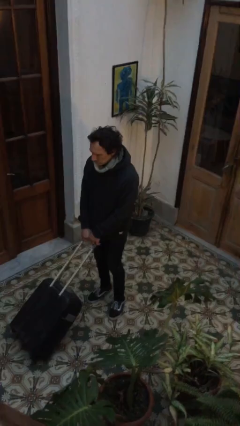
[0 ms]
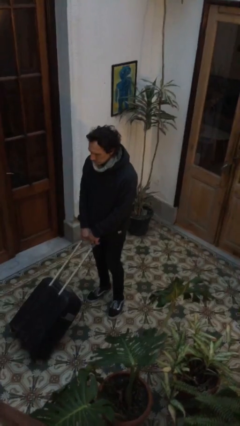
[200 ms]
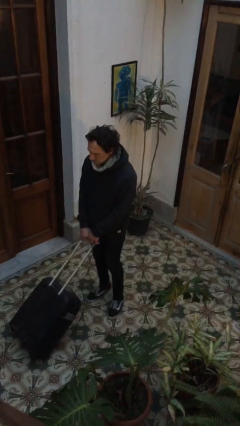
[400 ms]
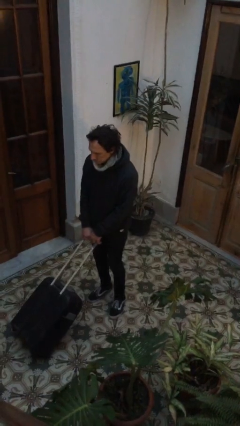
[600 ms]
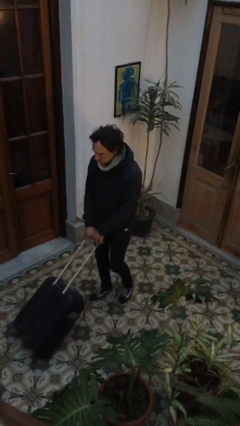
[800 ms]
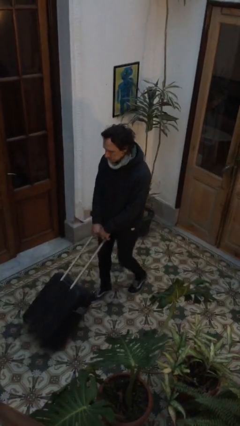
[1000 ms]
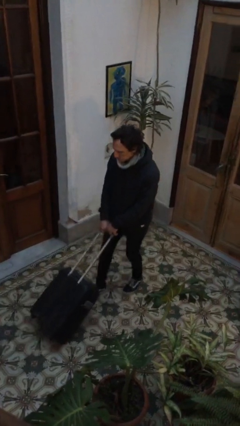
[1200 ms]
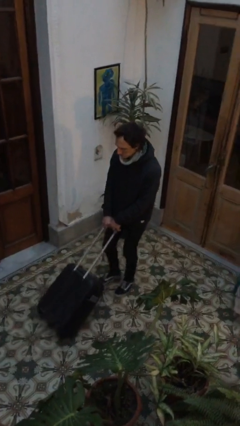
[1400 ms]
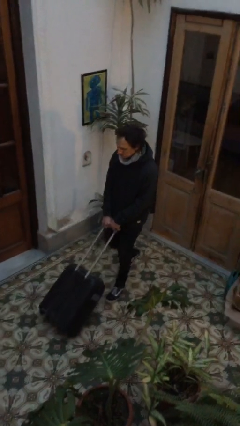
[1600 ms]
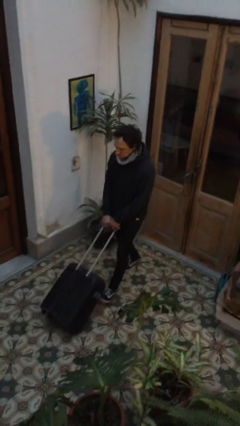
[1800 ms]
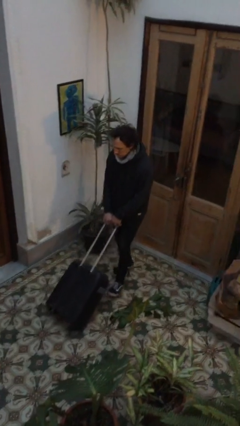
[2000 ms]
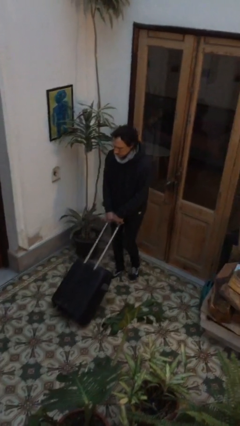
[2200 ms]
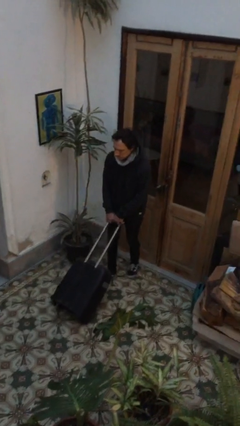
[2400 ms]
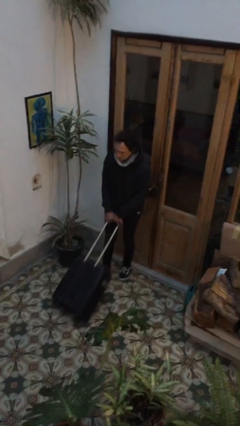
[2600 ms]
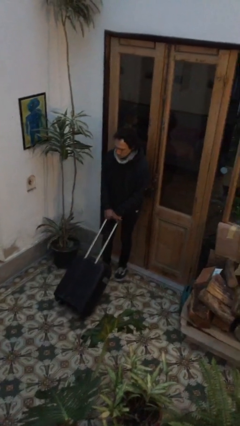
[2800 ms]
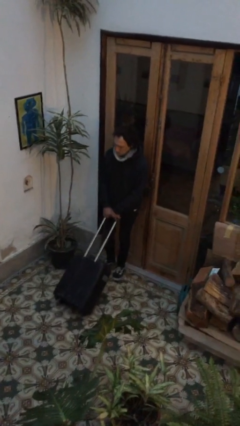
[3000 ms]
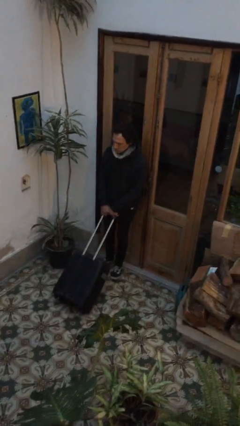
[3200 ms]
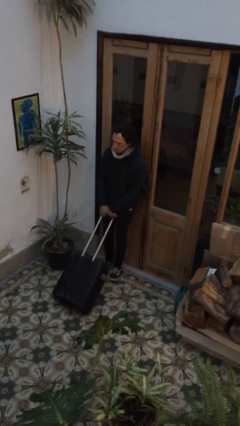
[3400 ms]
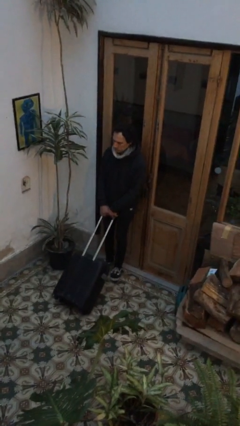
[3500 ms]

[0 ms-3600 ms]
person pulls wheeled cart

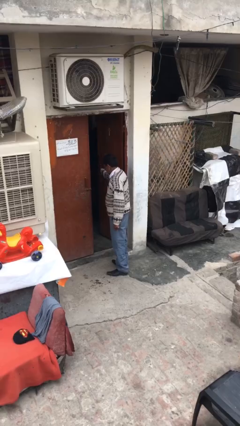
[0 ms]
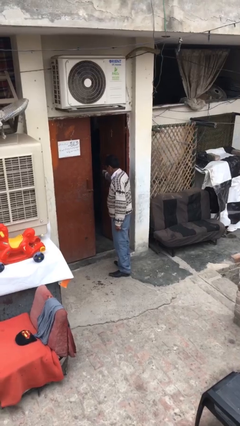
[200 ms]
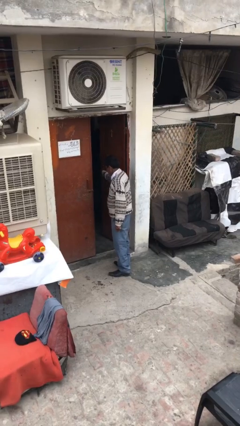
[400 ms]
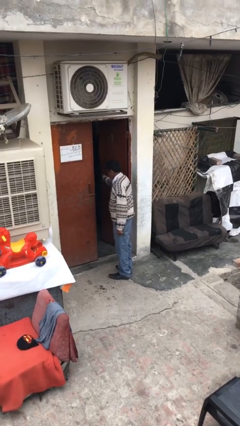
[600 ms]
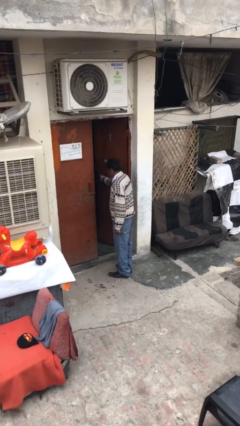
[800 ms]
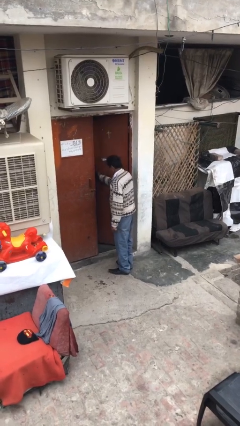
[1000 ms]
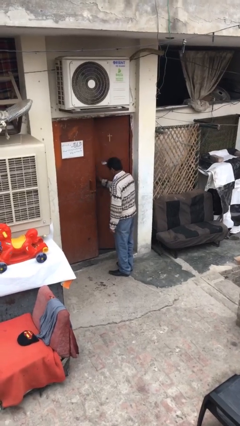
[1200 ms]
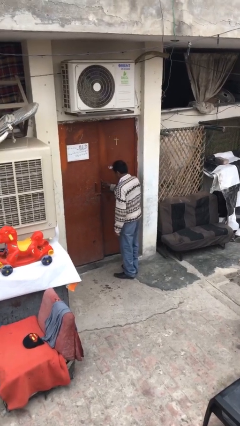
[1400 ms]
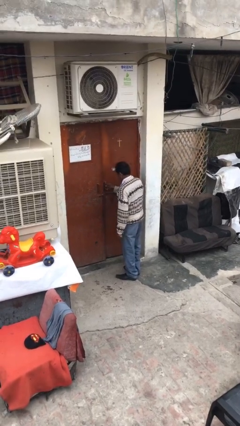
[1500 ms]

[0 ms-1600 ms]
person closes facility door

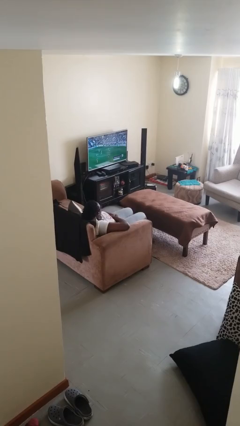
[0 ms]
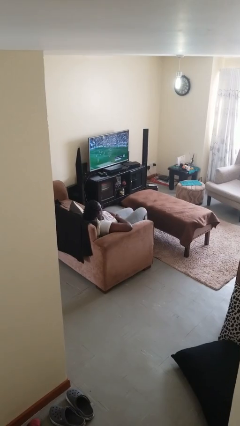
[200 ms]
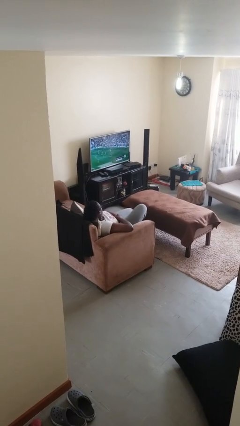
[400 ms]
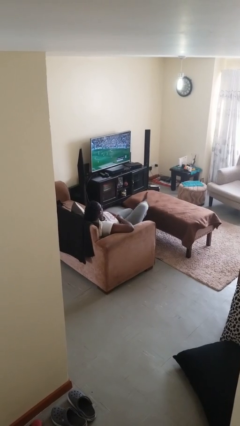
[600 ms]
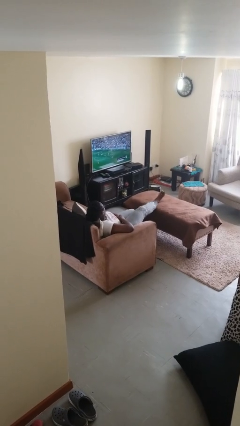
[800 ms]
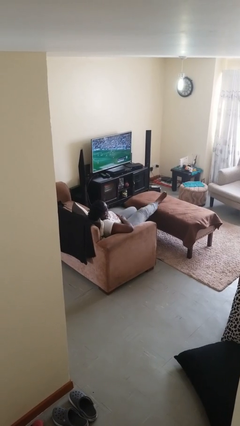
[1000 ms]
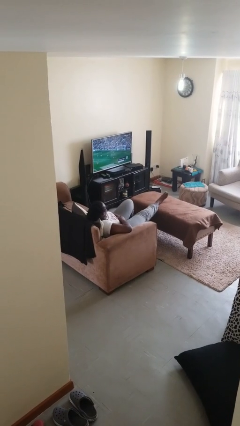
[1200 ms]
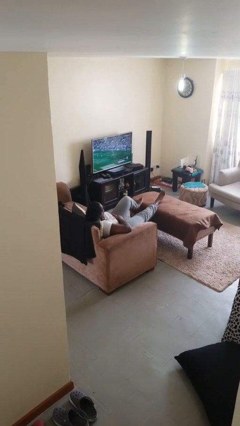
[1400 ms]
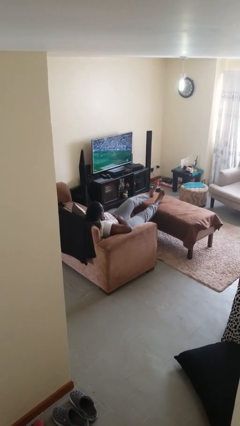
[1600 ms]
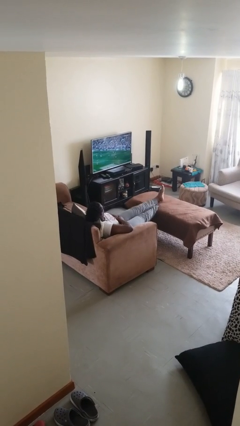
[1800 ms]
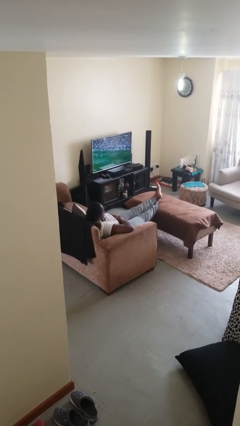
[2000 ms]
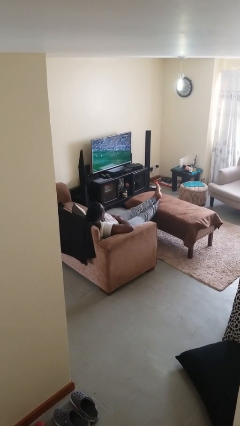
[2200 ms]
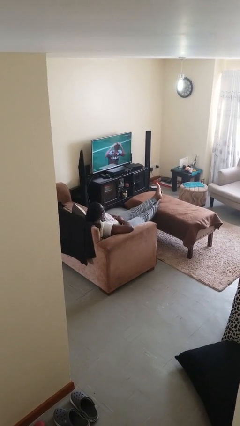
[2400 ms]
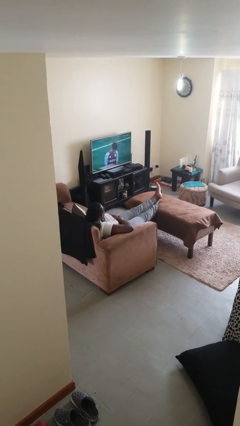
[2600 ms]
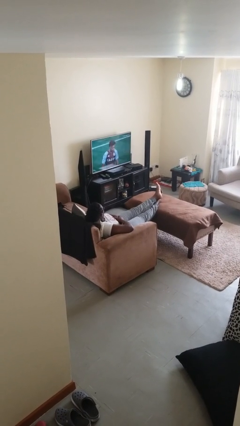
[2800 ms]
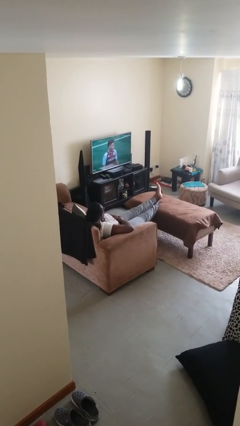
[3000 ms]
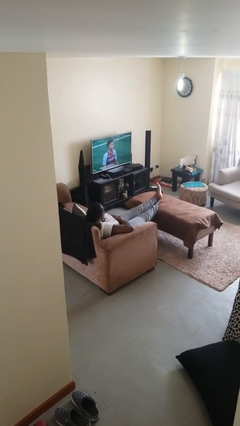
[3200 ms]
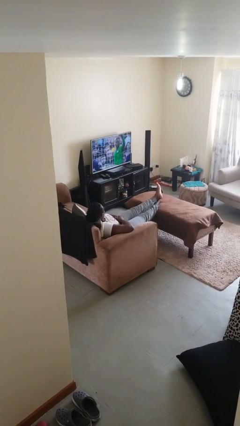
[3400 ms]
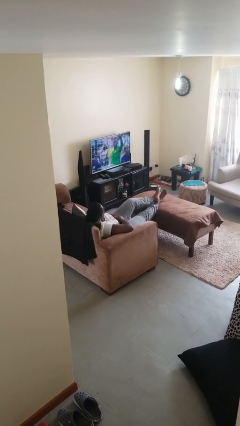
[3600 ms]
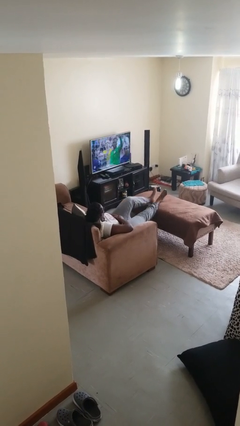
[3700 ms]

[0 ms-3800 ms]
person puts feet up

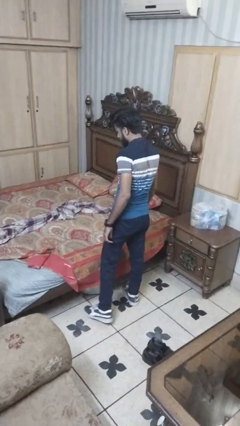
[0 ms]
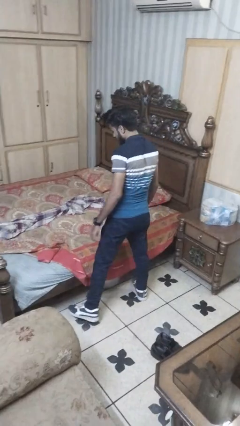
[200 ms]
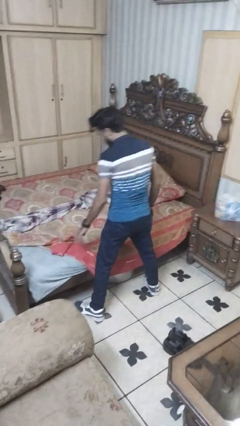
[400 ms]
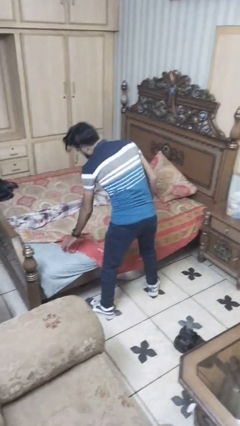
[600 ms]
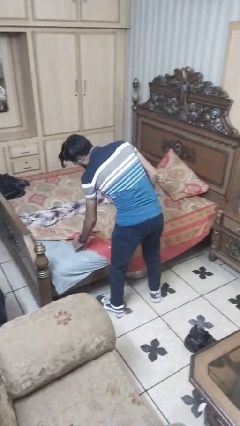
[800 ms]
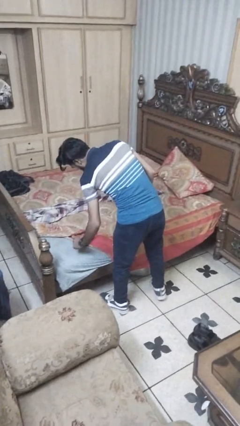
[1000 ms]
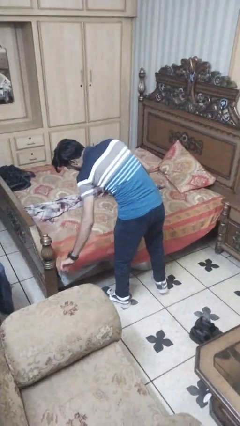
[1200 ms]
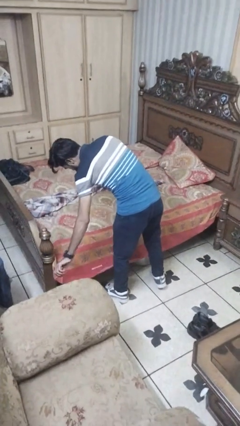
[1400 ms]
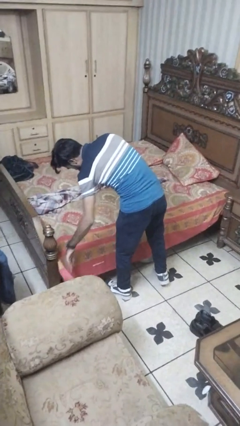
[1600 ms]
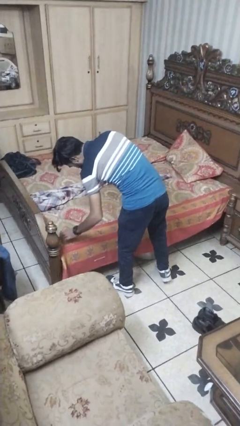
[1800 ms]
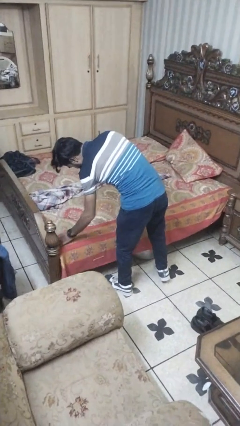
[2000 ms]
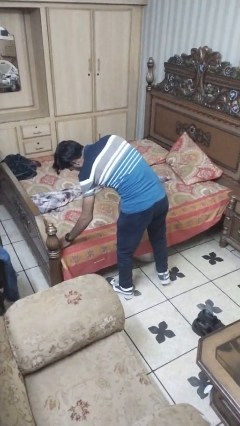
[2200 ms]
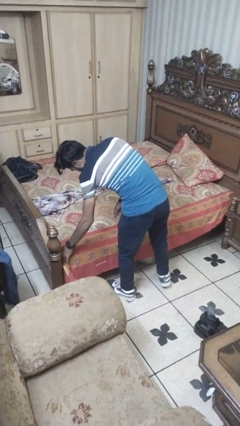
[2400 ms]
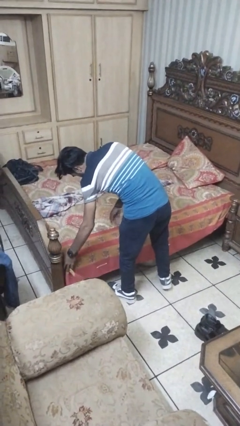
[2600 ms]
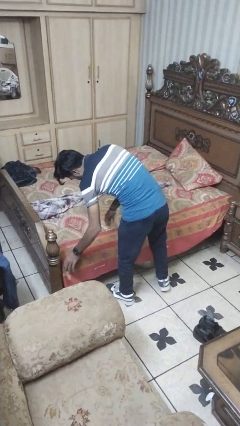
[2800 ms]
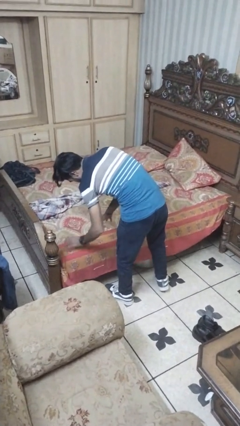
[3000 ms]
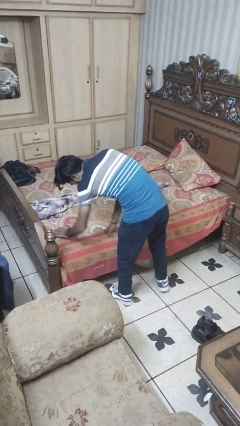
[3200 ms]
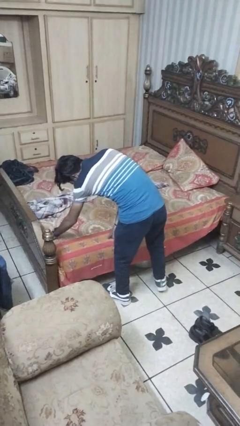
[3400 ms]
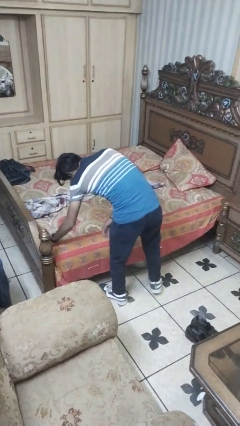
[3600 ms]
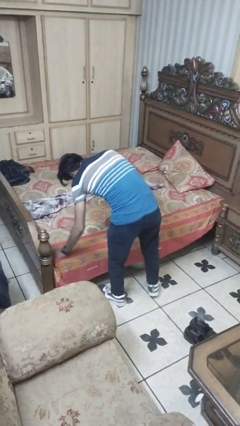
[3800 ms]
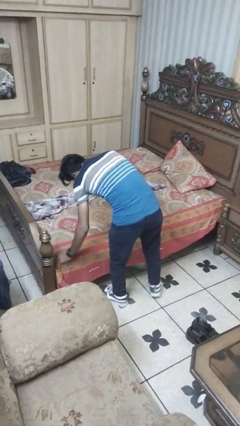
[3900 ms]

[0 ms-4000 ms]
person makes bed

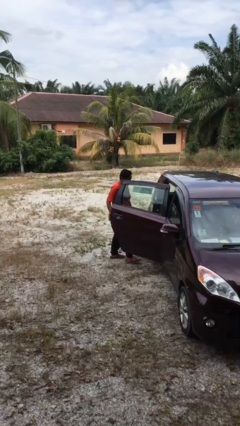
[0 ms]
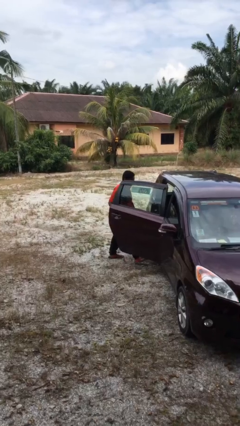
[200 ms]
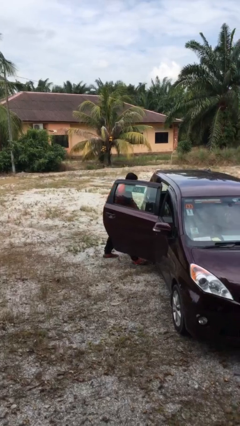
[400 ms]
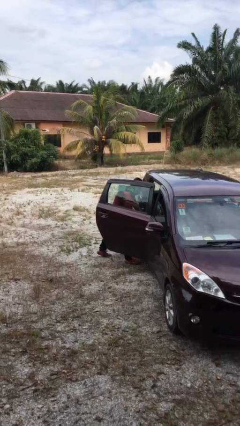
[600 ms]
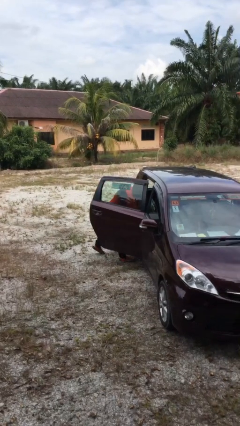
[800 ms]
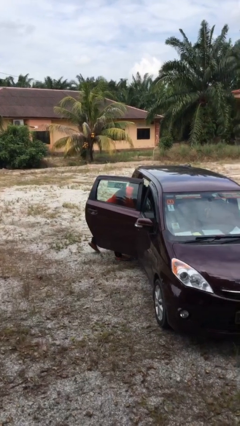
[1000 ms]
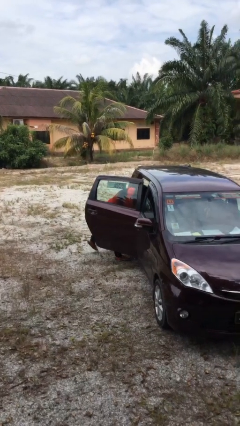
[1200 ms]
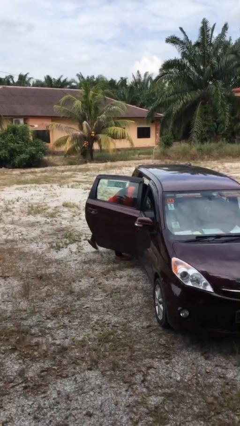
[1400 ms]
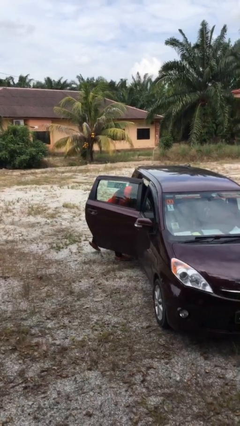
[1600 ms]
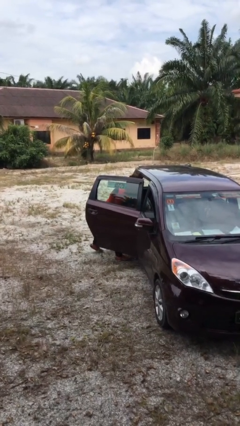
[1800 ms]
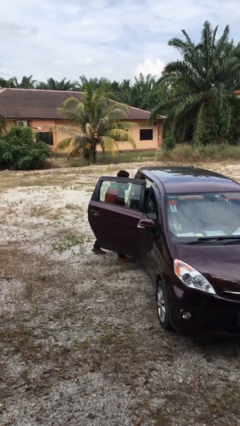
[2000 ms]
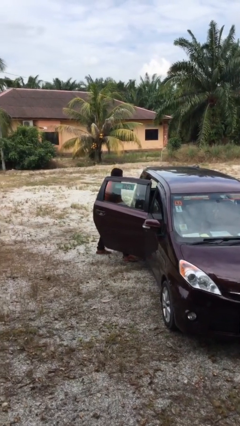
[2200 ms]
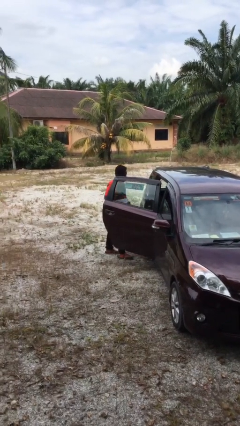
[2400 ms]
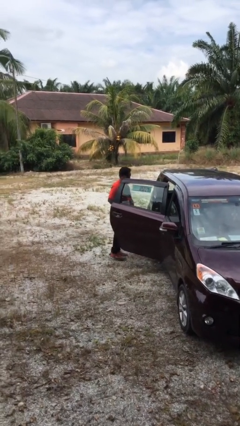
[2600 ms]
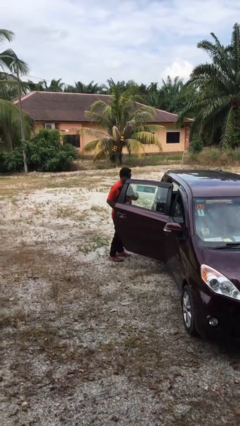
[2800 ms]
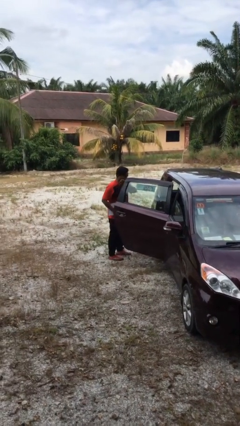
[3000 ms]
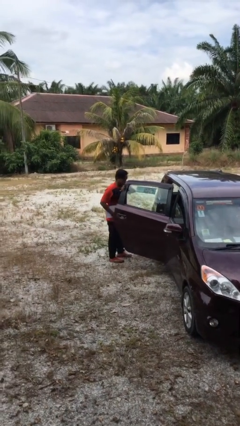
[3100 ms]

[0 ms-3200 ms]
person unloads car

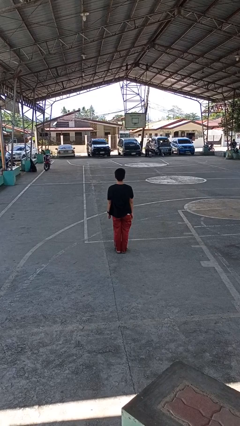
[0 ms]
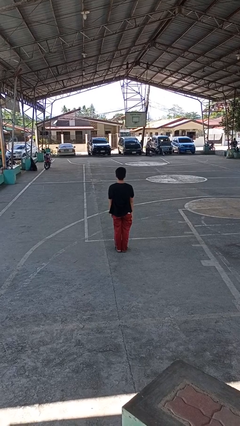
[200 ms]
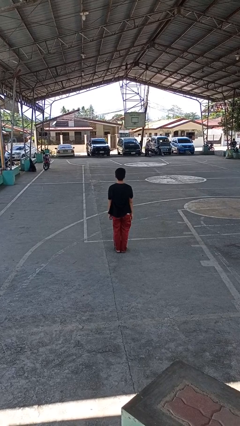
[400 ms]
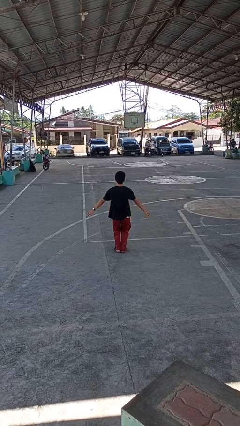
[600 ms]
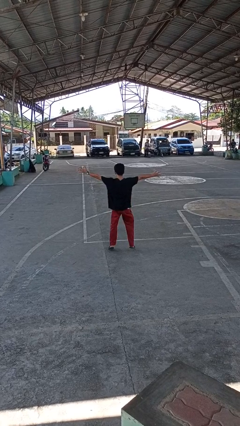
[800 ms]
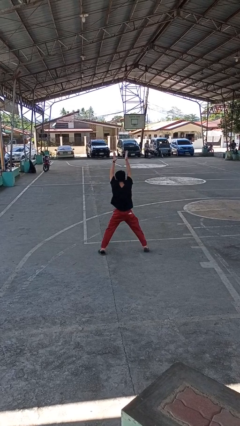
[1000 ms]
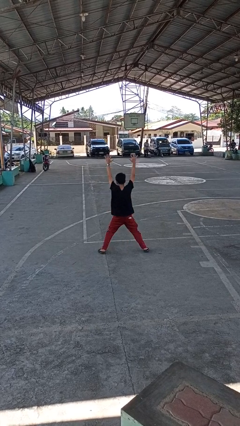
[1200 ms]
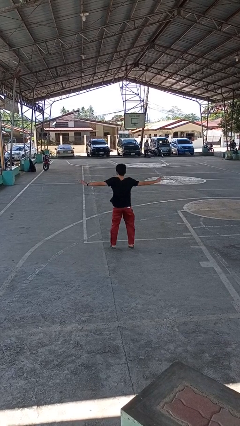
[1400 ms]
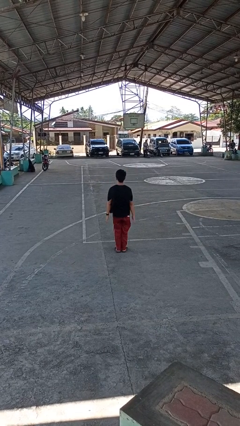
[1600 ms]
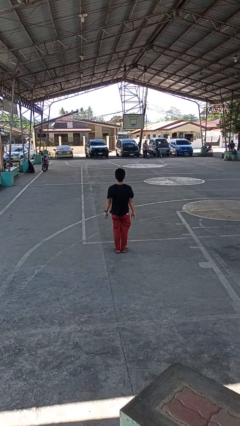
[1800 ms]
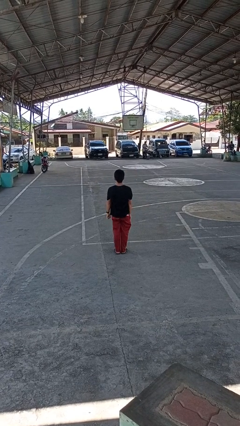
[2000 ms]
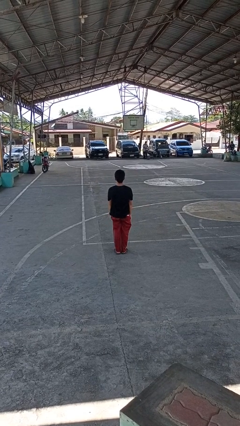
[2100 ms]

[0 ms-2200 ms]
person exercises with jumping jacks
